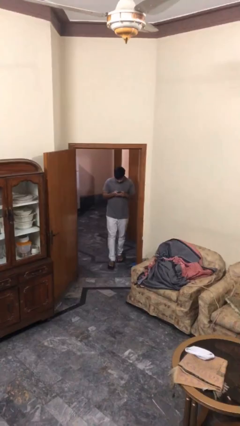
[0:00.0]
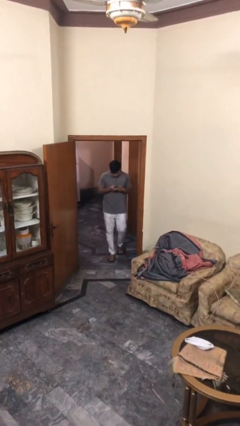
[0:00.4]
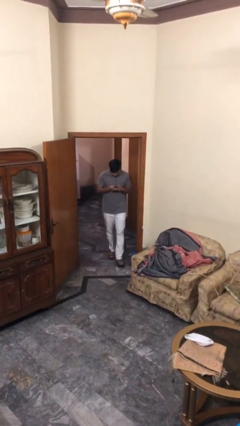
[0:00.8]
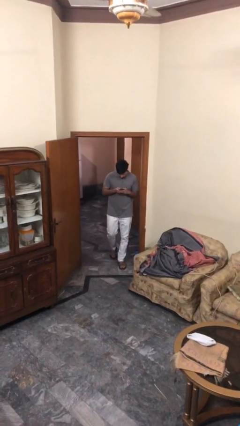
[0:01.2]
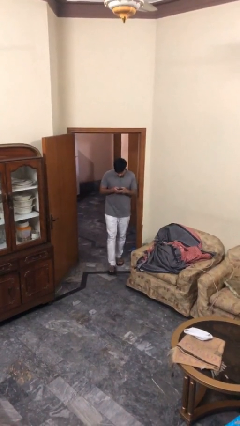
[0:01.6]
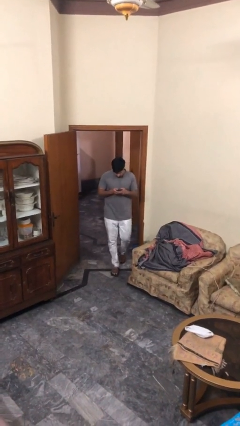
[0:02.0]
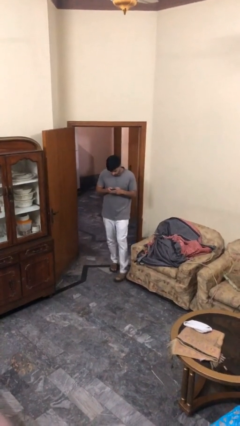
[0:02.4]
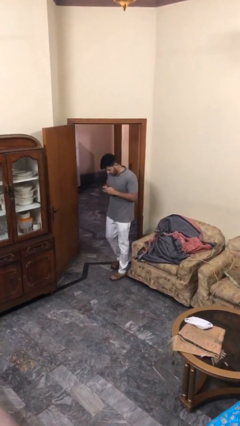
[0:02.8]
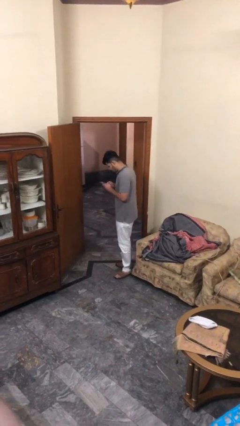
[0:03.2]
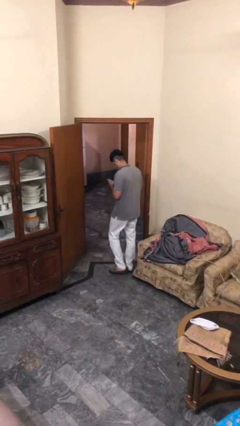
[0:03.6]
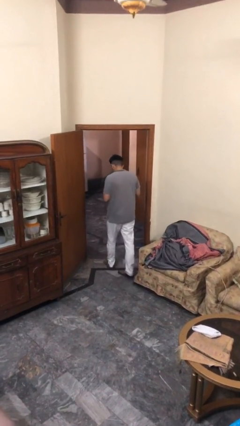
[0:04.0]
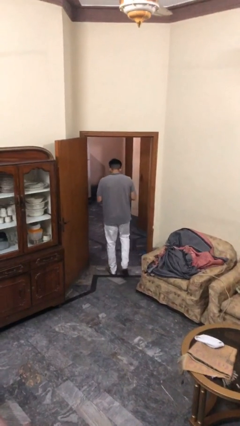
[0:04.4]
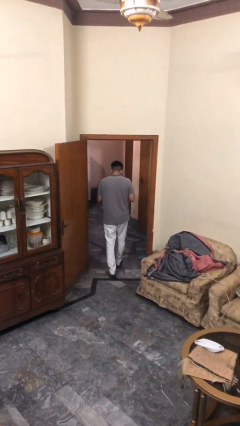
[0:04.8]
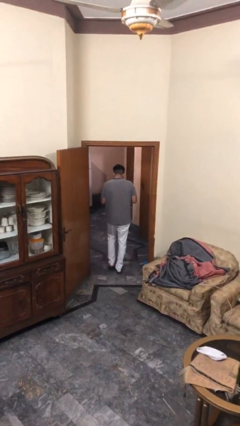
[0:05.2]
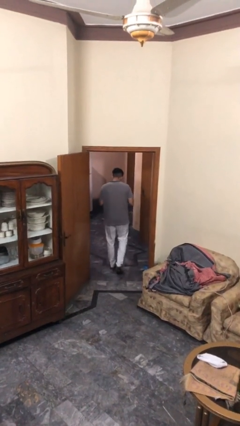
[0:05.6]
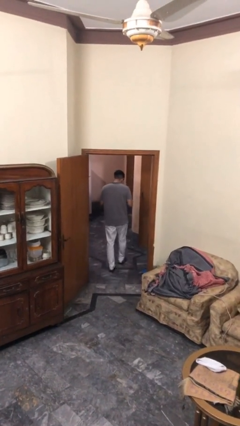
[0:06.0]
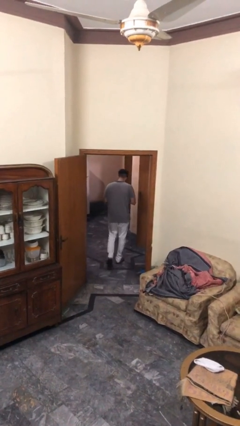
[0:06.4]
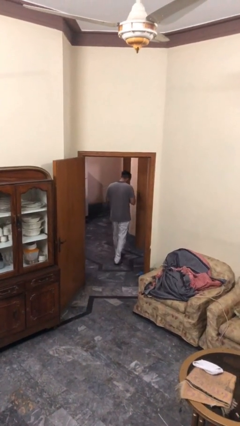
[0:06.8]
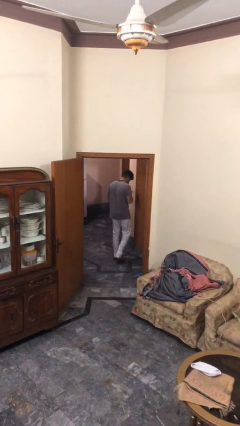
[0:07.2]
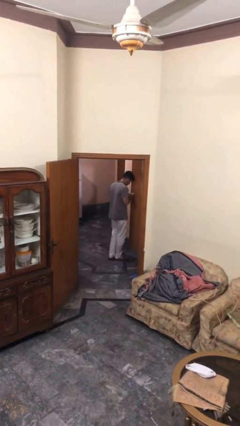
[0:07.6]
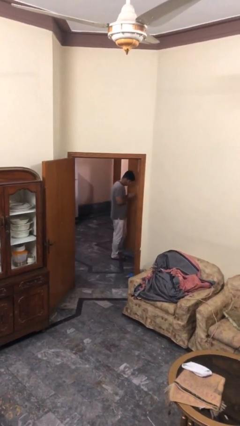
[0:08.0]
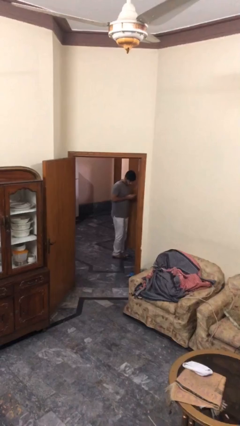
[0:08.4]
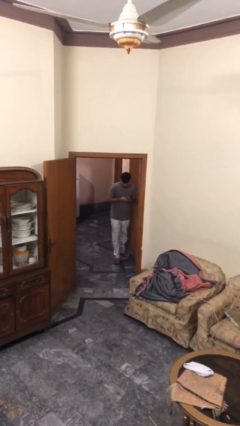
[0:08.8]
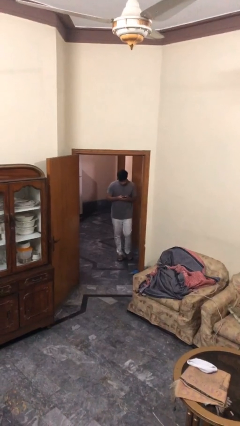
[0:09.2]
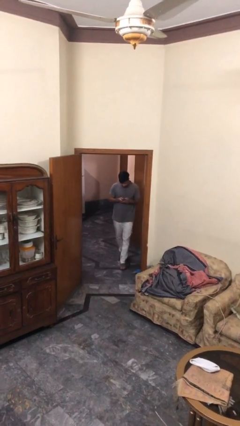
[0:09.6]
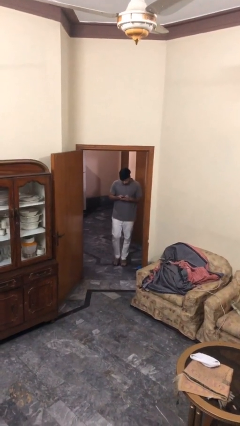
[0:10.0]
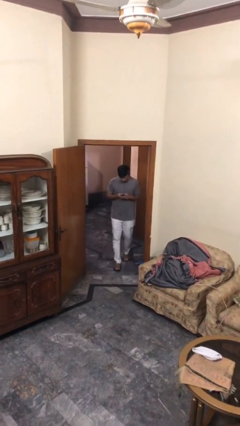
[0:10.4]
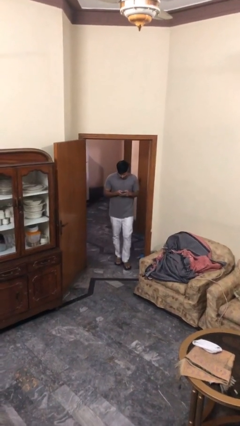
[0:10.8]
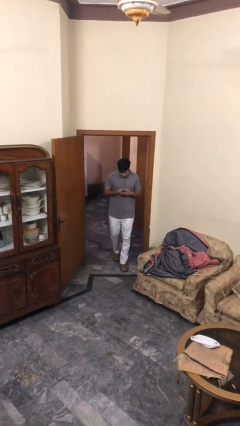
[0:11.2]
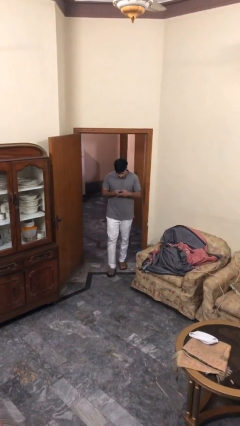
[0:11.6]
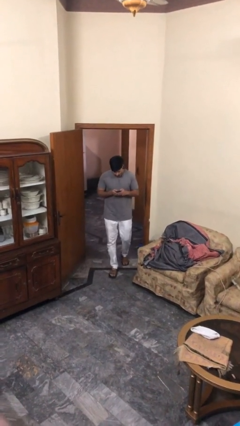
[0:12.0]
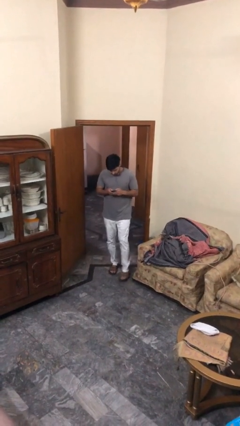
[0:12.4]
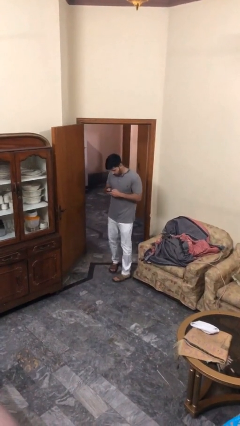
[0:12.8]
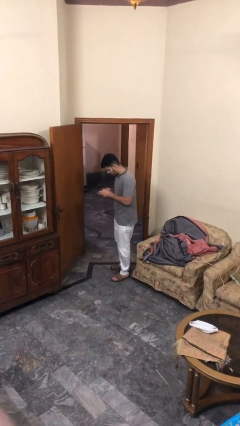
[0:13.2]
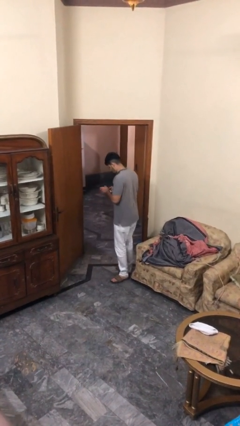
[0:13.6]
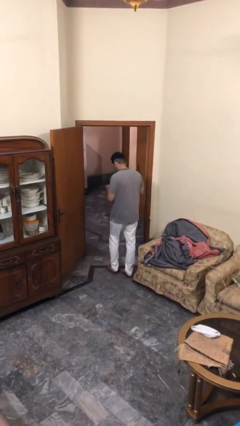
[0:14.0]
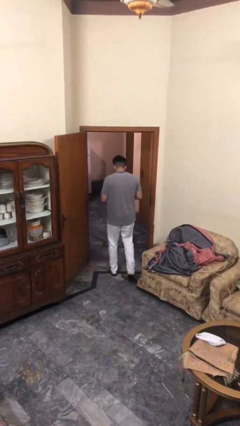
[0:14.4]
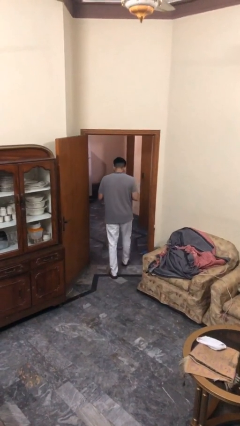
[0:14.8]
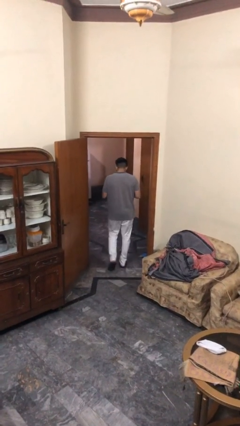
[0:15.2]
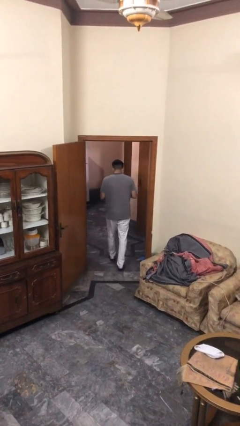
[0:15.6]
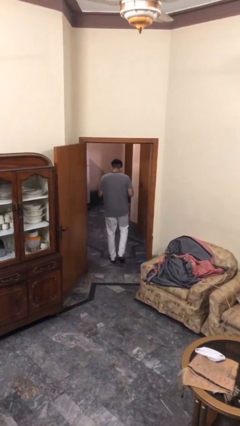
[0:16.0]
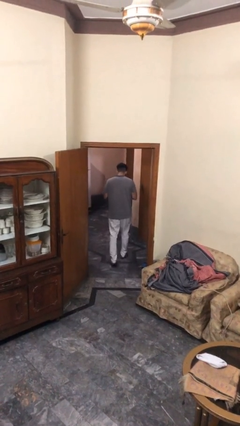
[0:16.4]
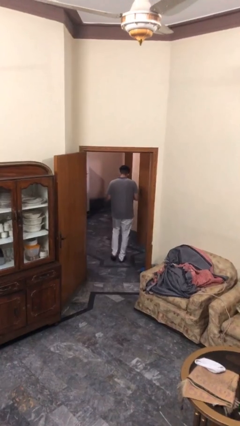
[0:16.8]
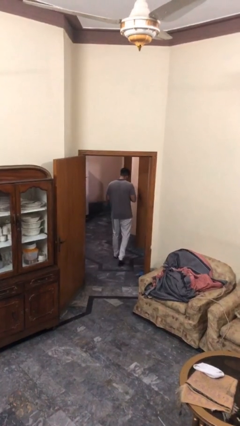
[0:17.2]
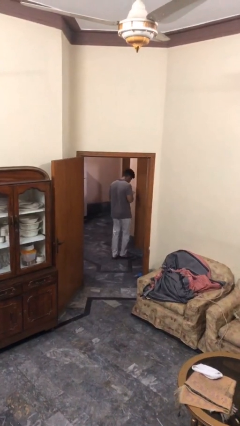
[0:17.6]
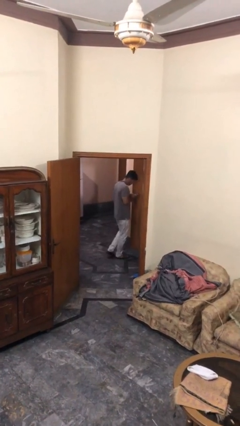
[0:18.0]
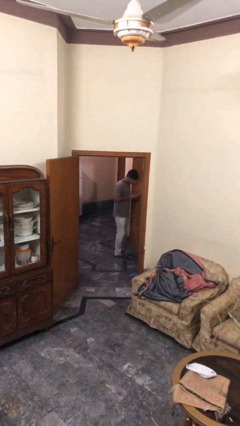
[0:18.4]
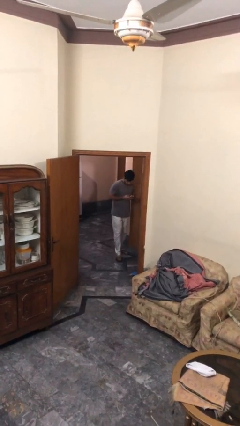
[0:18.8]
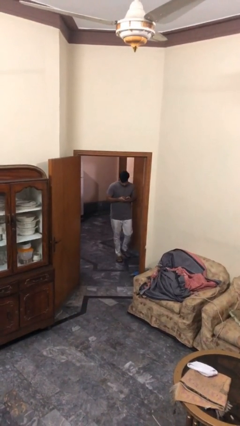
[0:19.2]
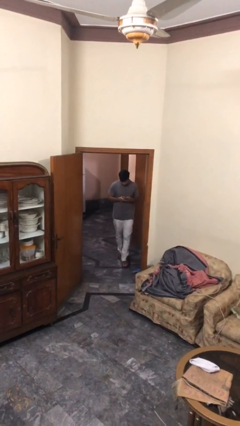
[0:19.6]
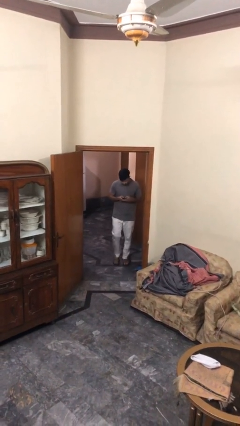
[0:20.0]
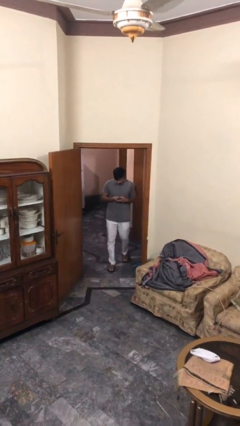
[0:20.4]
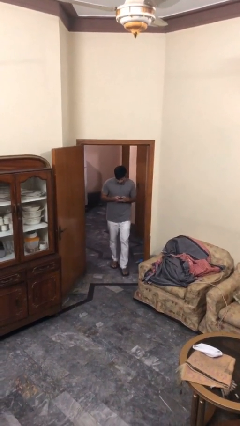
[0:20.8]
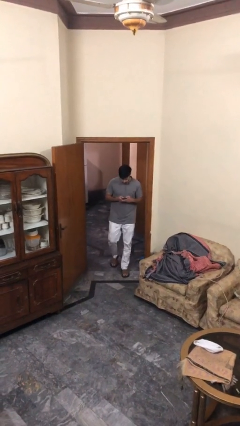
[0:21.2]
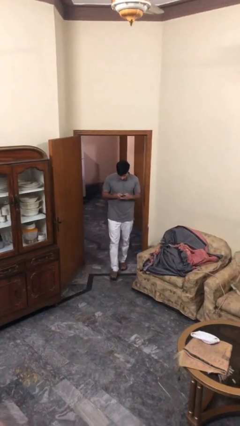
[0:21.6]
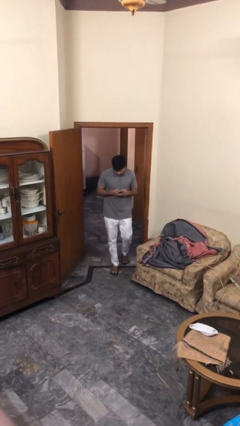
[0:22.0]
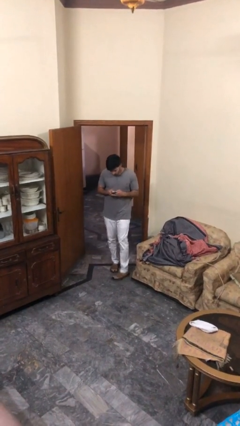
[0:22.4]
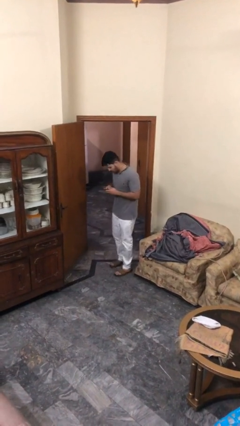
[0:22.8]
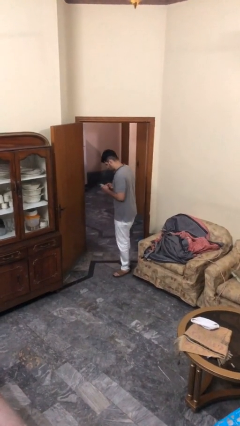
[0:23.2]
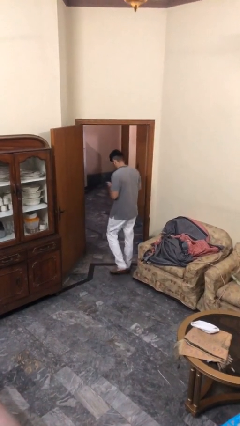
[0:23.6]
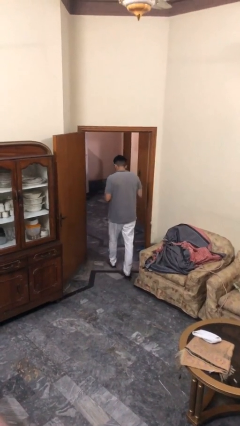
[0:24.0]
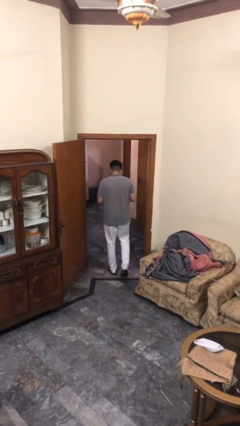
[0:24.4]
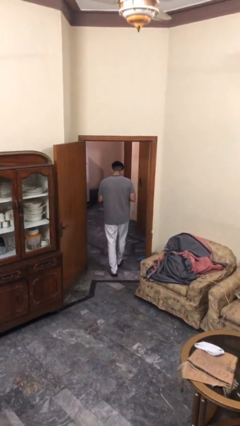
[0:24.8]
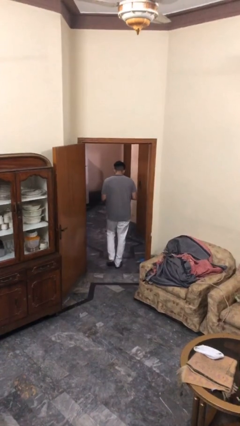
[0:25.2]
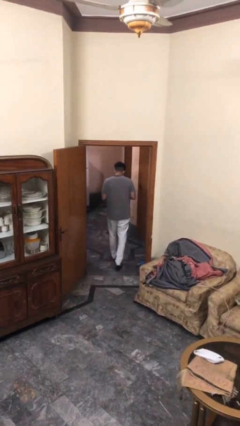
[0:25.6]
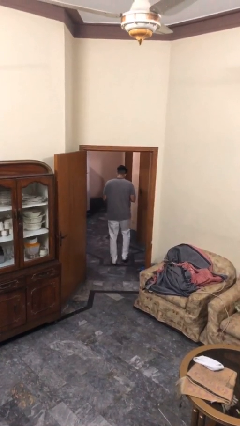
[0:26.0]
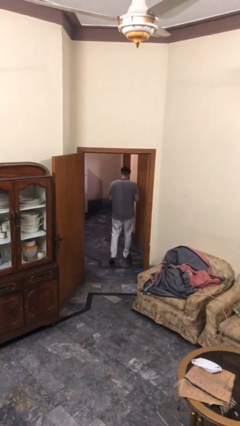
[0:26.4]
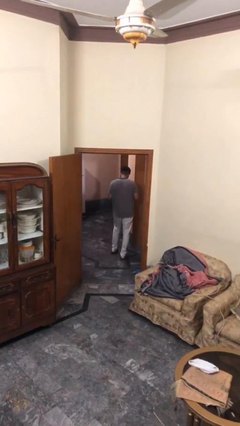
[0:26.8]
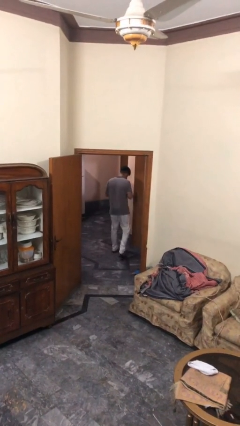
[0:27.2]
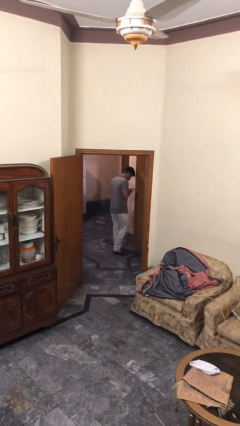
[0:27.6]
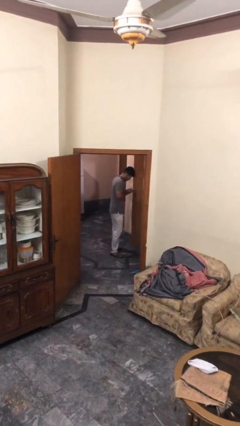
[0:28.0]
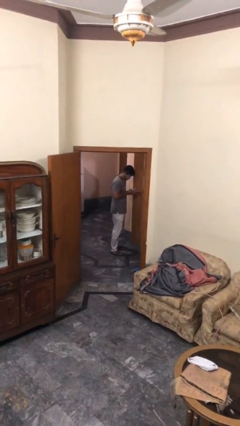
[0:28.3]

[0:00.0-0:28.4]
person texts on phone

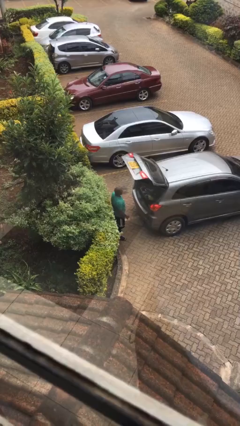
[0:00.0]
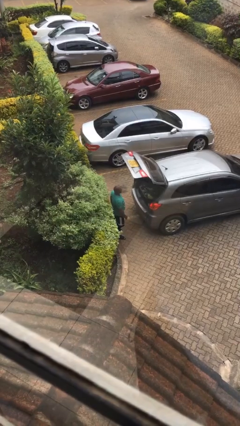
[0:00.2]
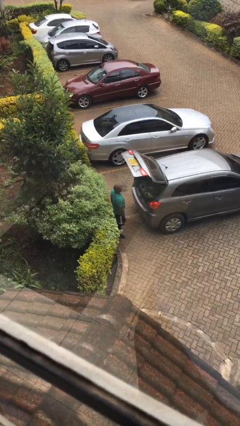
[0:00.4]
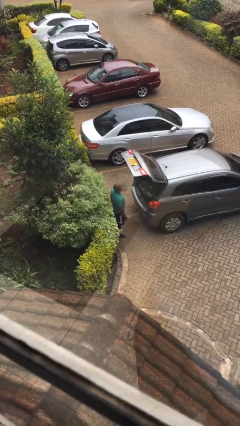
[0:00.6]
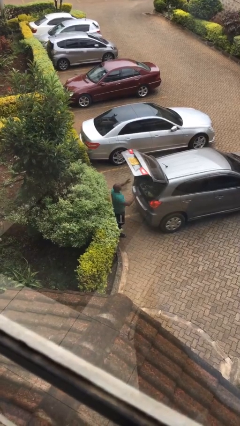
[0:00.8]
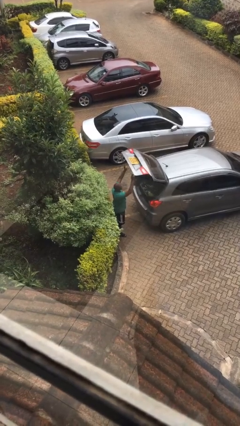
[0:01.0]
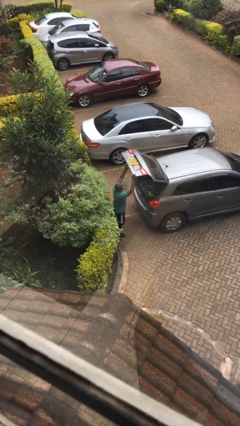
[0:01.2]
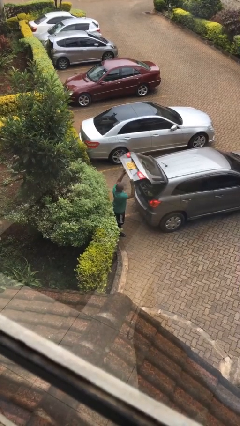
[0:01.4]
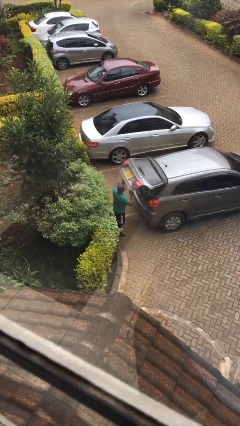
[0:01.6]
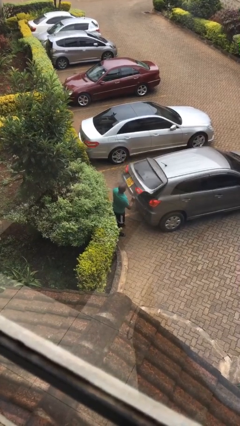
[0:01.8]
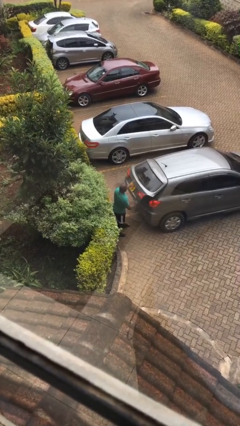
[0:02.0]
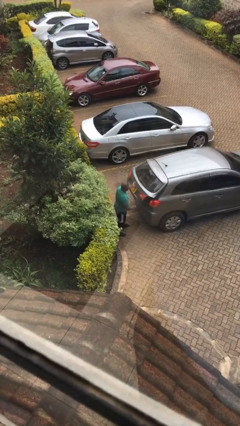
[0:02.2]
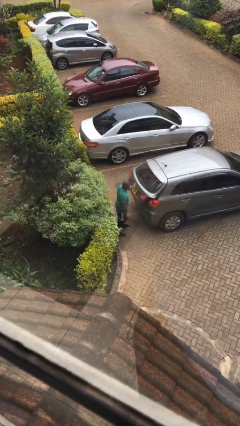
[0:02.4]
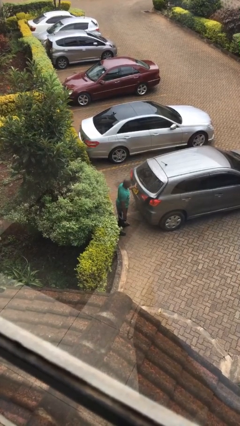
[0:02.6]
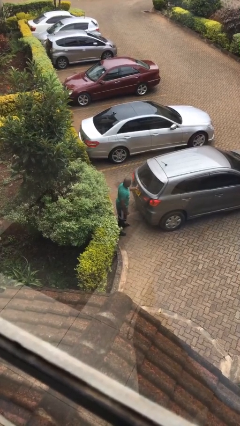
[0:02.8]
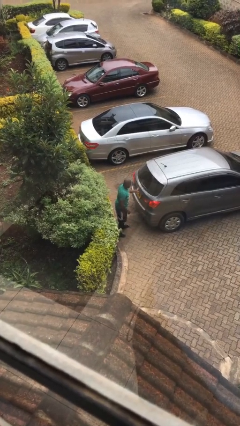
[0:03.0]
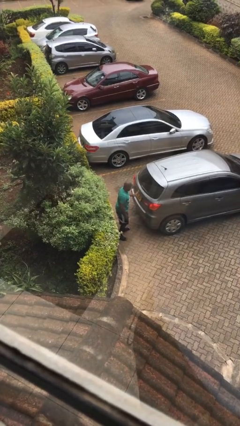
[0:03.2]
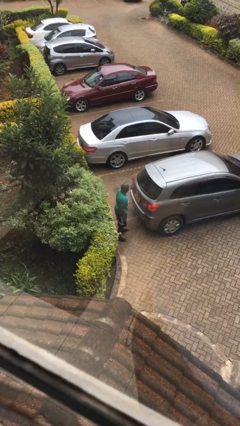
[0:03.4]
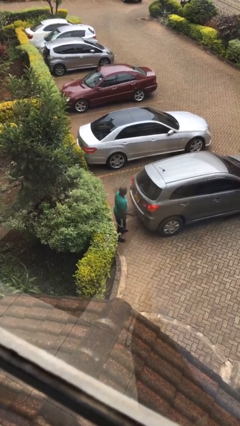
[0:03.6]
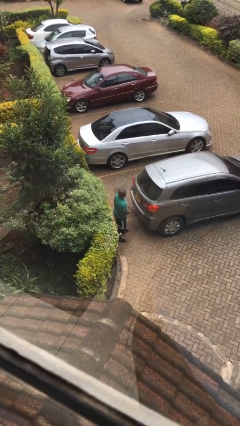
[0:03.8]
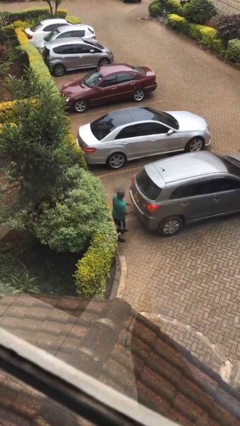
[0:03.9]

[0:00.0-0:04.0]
person closes car trunk
